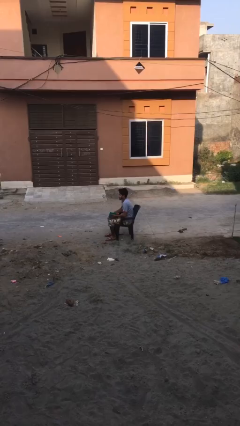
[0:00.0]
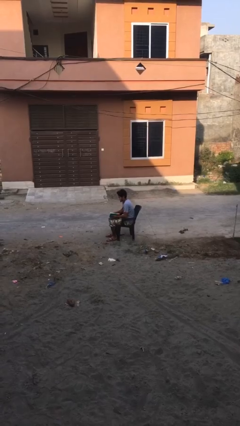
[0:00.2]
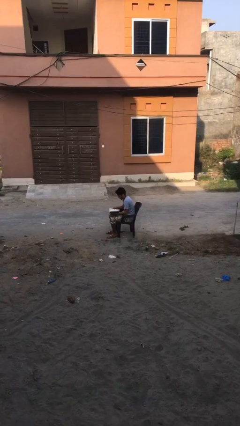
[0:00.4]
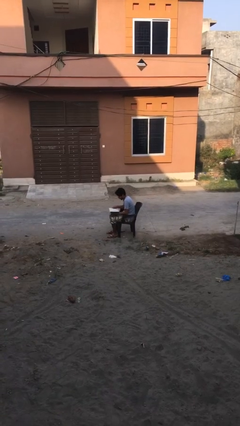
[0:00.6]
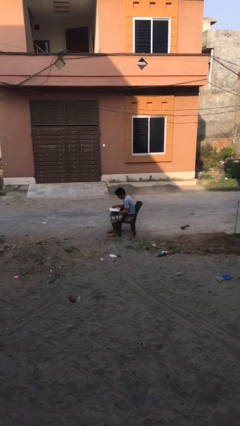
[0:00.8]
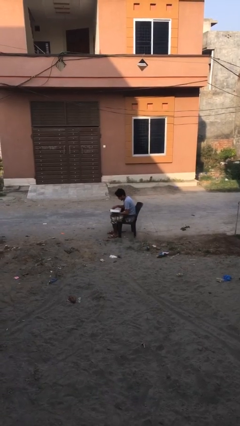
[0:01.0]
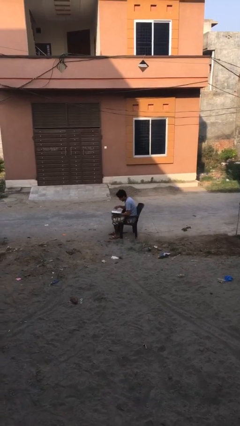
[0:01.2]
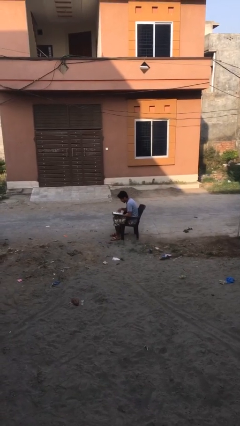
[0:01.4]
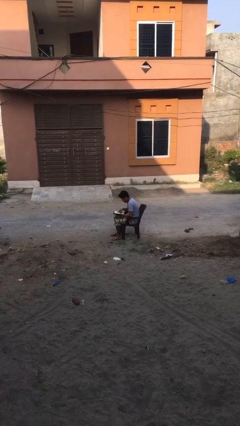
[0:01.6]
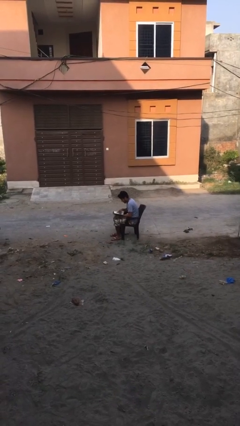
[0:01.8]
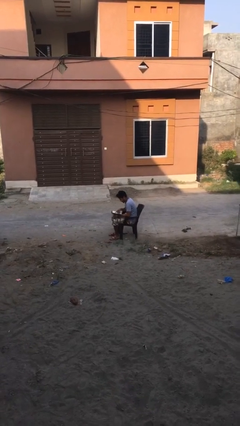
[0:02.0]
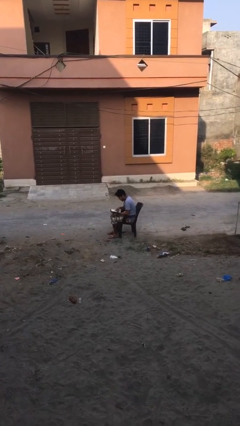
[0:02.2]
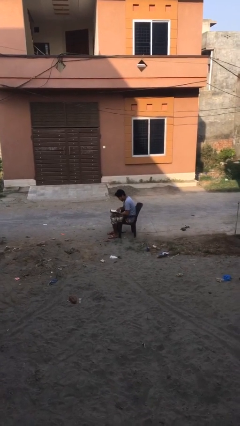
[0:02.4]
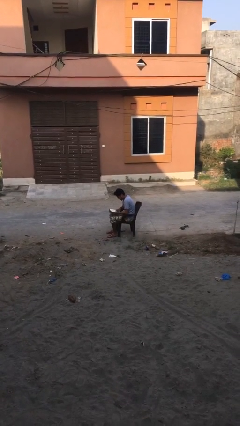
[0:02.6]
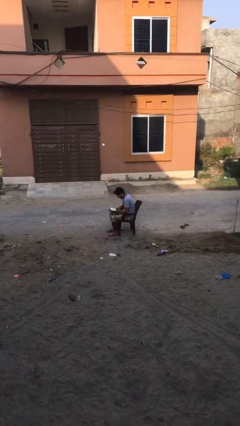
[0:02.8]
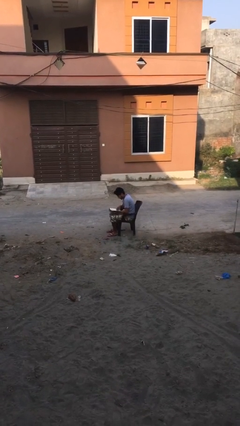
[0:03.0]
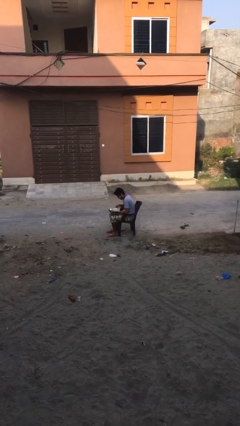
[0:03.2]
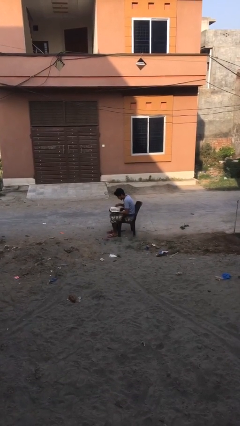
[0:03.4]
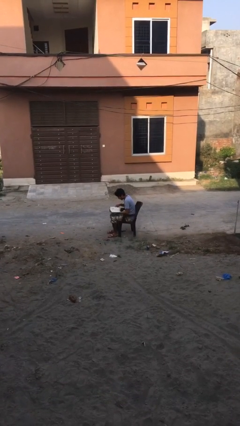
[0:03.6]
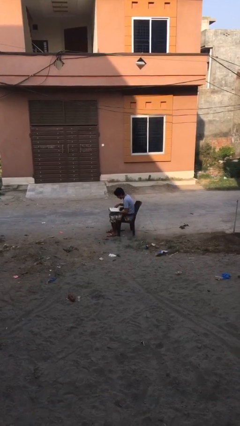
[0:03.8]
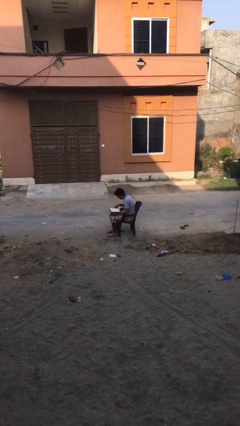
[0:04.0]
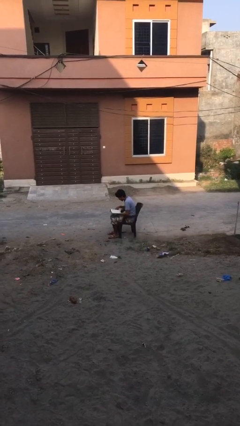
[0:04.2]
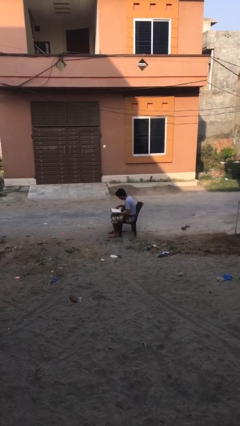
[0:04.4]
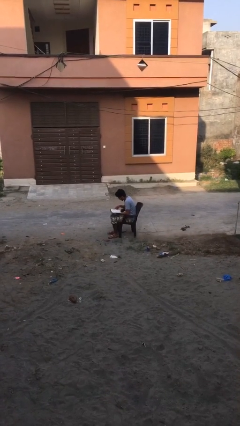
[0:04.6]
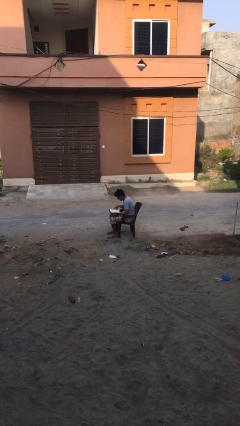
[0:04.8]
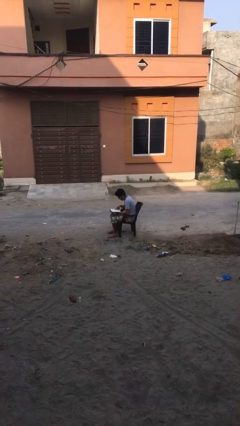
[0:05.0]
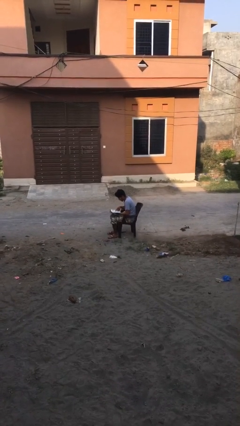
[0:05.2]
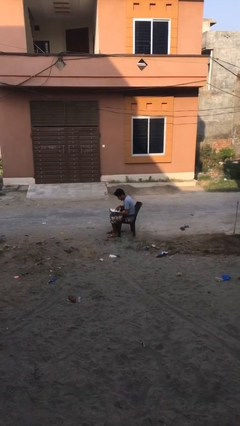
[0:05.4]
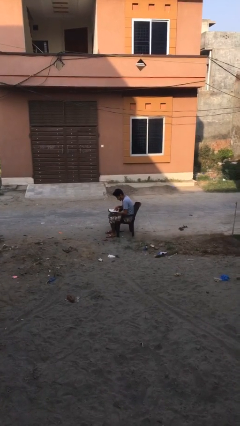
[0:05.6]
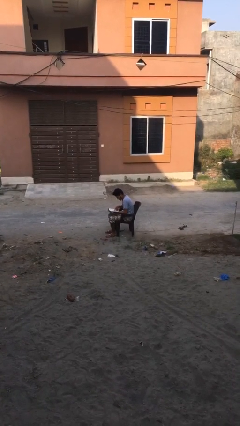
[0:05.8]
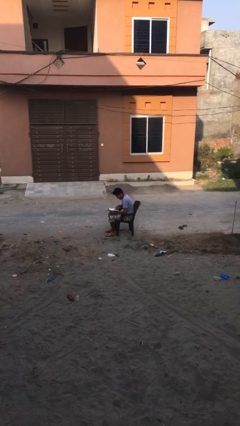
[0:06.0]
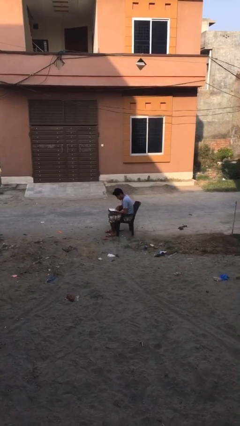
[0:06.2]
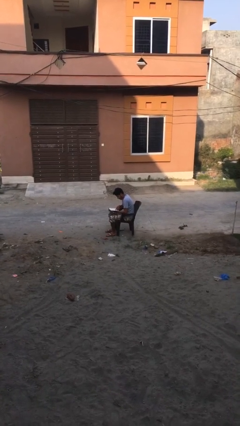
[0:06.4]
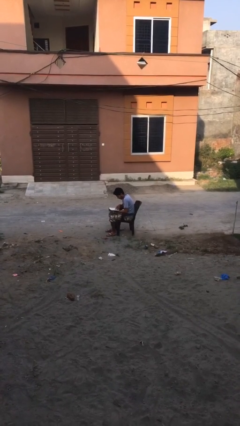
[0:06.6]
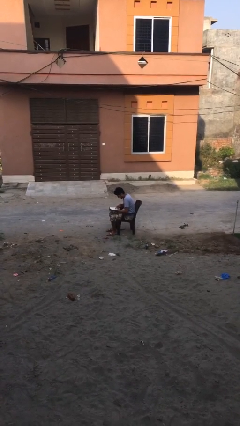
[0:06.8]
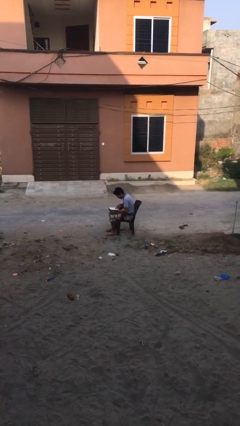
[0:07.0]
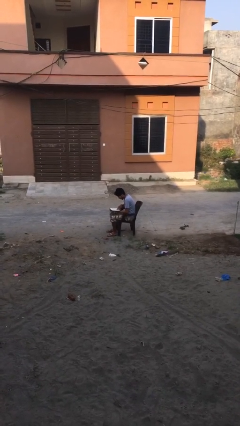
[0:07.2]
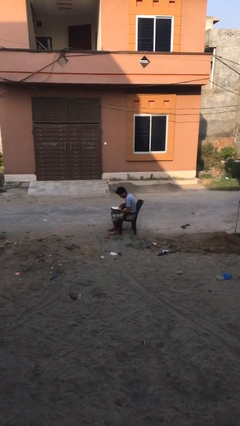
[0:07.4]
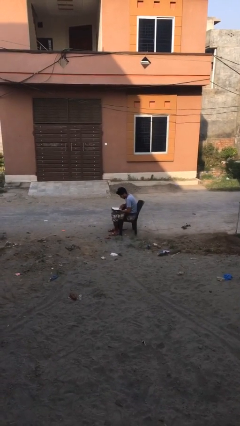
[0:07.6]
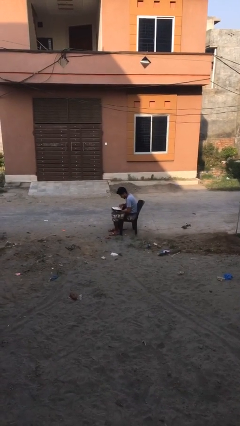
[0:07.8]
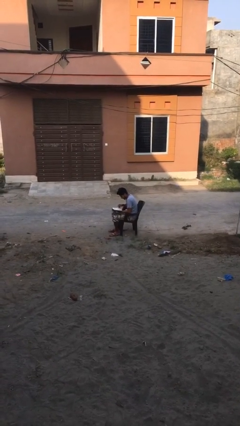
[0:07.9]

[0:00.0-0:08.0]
person reads document

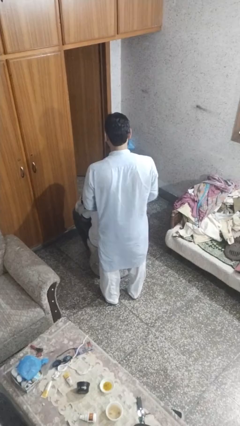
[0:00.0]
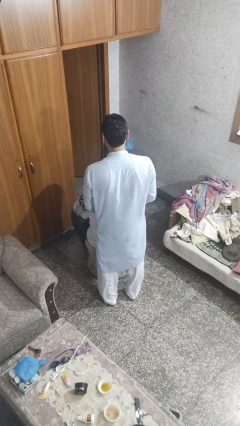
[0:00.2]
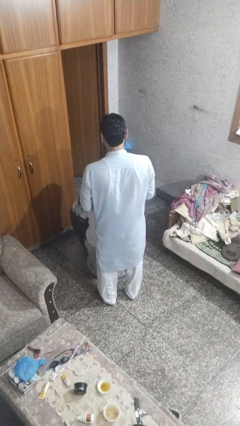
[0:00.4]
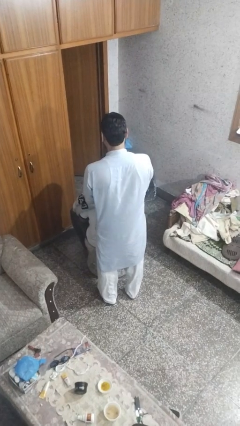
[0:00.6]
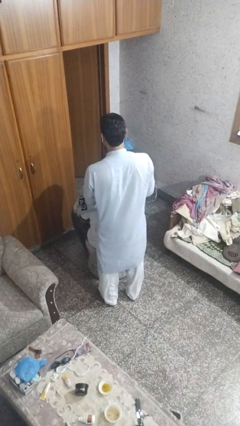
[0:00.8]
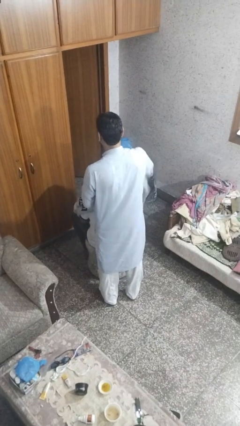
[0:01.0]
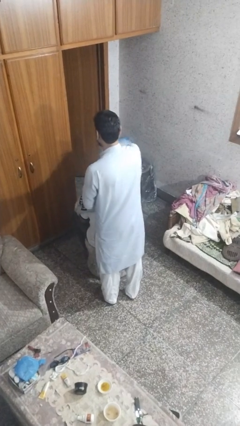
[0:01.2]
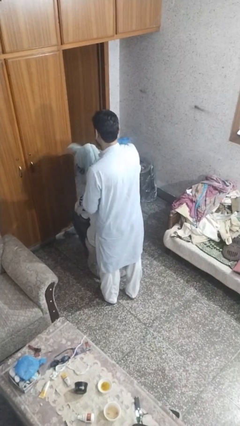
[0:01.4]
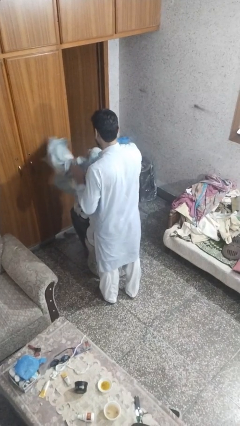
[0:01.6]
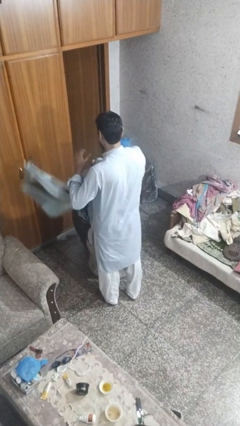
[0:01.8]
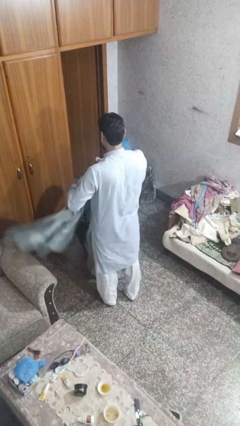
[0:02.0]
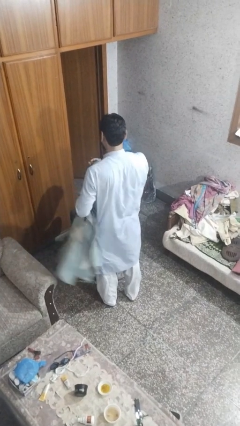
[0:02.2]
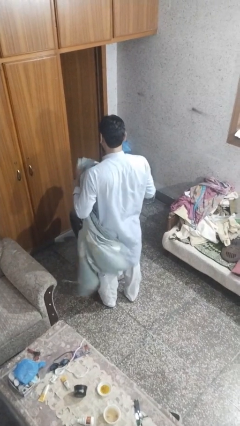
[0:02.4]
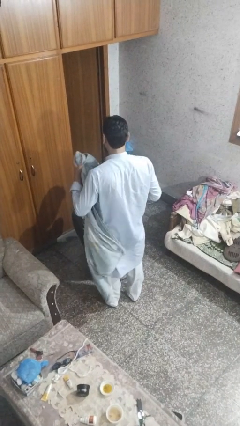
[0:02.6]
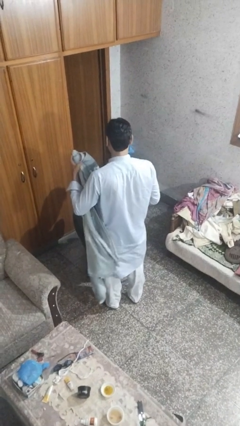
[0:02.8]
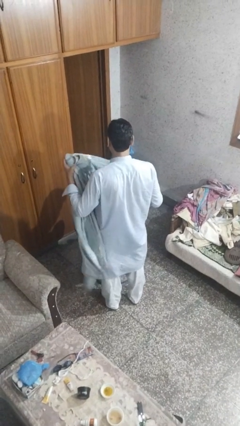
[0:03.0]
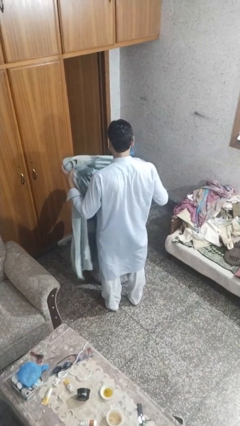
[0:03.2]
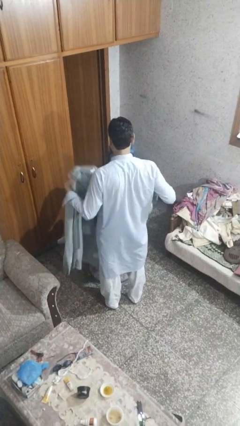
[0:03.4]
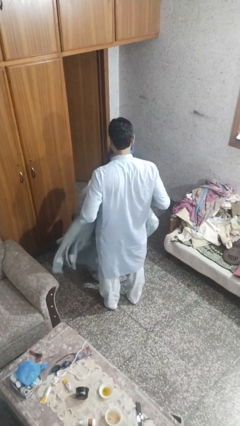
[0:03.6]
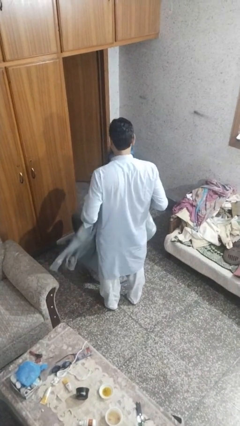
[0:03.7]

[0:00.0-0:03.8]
person uncovers friend with blanket

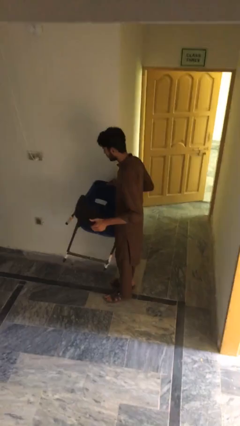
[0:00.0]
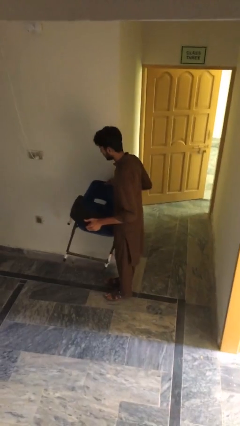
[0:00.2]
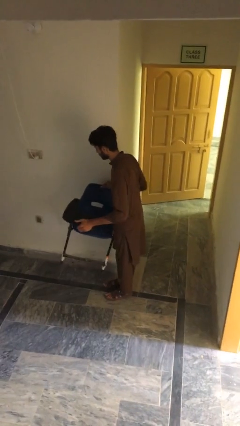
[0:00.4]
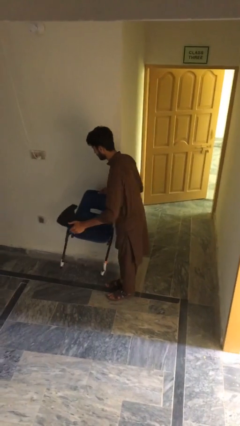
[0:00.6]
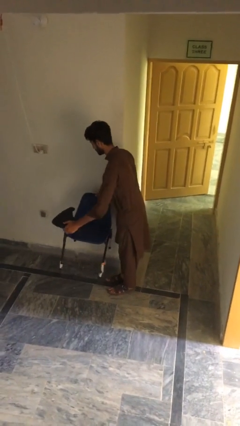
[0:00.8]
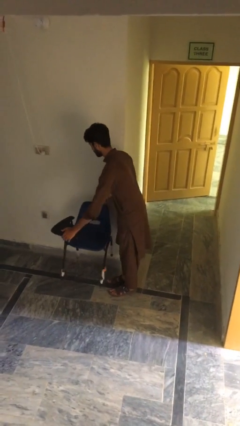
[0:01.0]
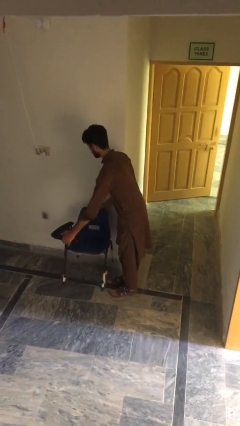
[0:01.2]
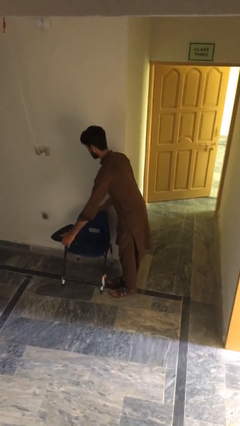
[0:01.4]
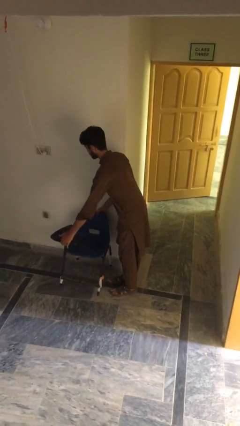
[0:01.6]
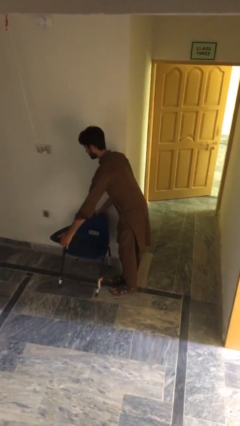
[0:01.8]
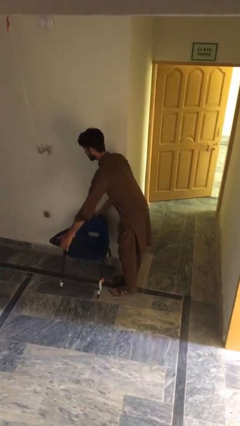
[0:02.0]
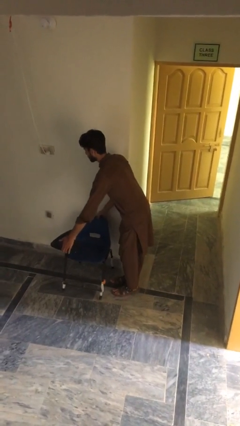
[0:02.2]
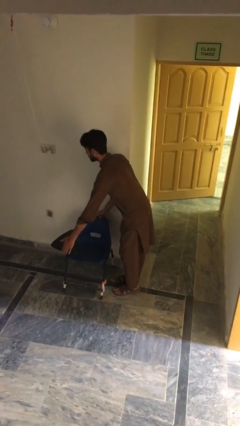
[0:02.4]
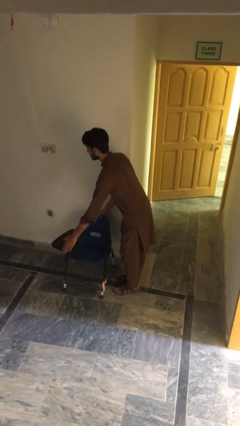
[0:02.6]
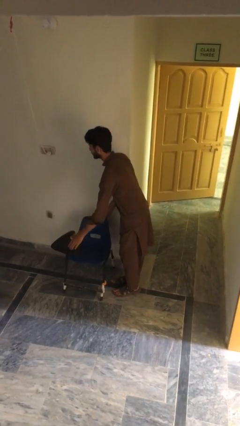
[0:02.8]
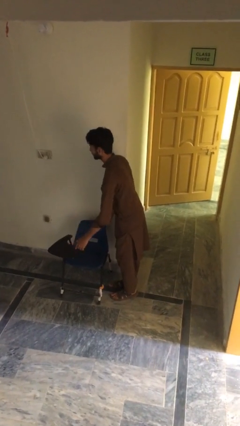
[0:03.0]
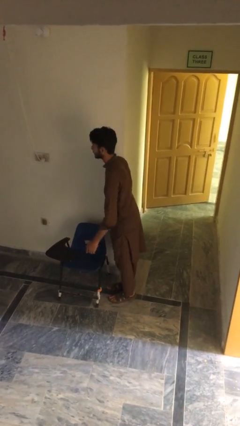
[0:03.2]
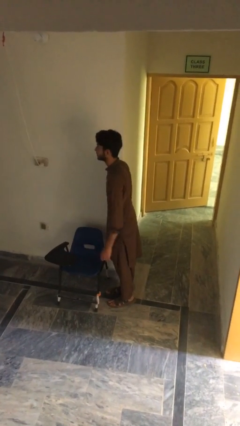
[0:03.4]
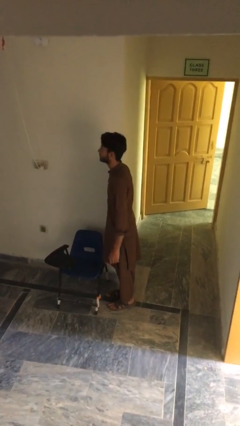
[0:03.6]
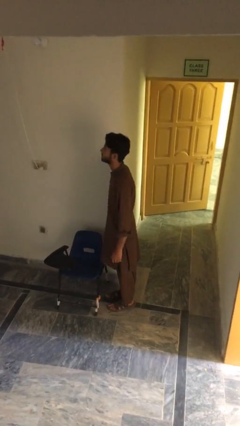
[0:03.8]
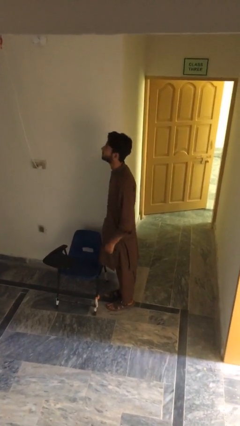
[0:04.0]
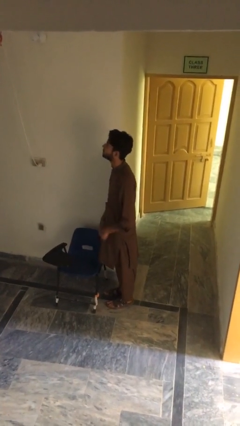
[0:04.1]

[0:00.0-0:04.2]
person puts down object on floor

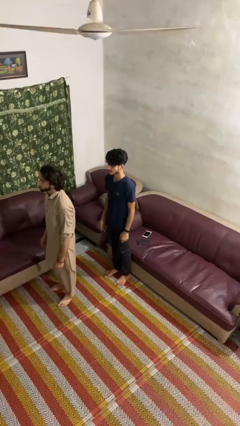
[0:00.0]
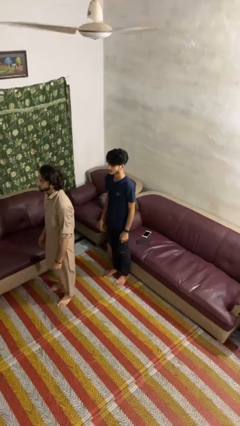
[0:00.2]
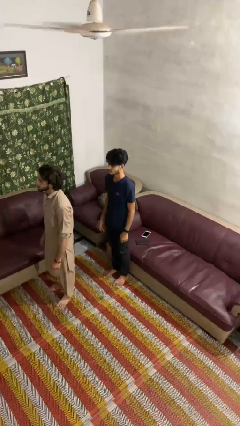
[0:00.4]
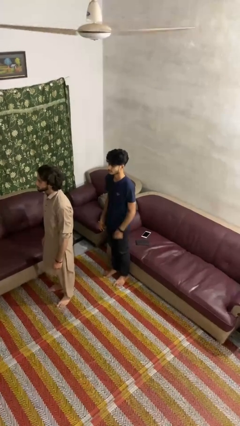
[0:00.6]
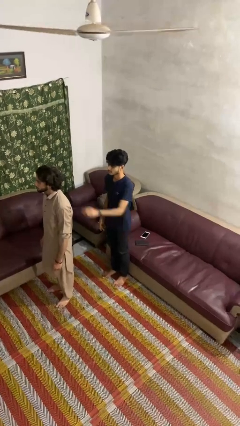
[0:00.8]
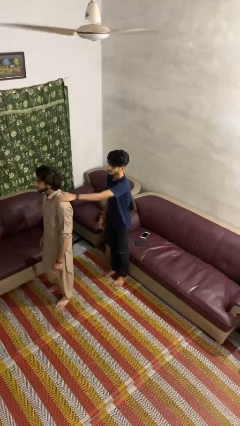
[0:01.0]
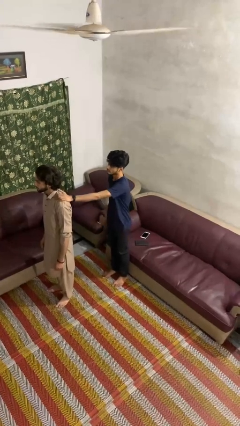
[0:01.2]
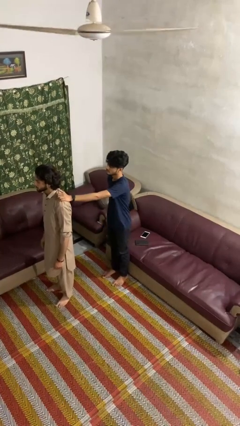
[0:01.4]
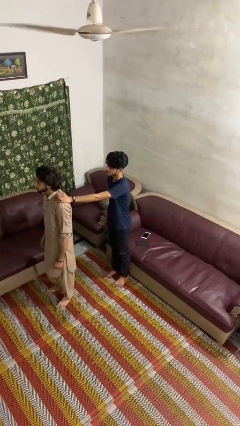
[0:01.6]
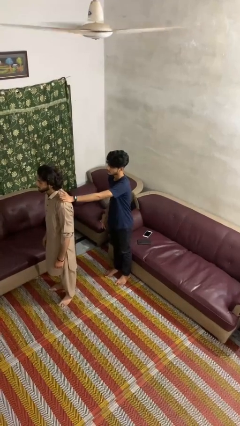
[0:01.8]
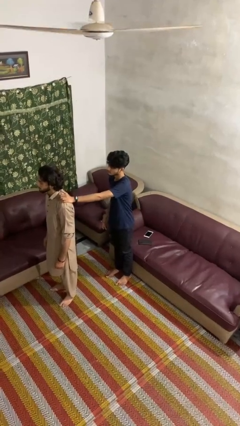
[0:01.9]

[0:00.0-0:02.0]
person grabs person by shoulder
